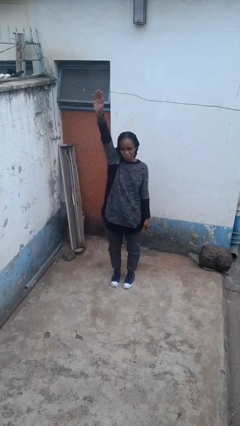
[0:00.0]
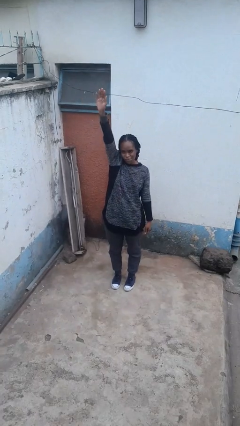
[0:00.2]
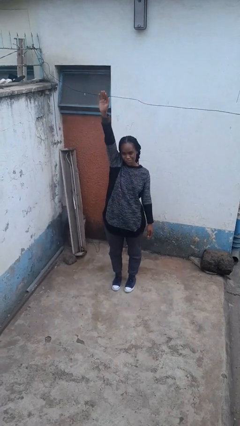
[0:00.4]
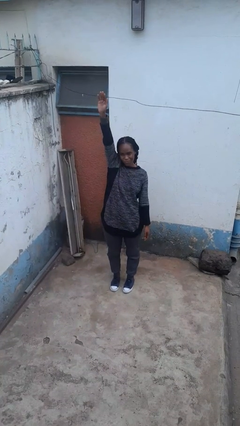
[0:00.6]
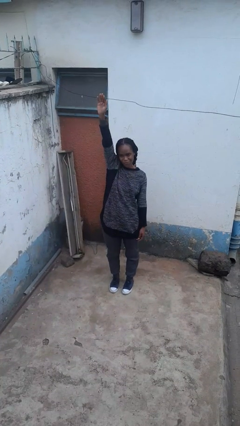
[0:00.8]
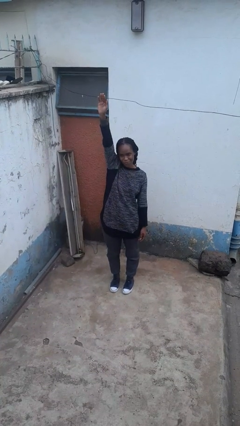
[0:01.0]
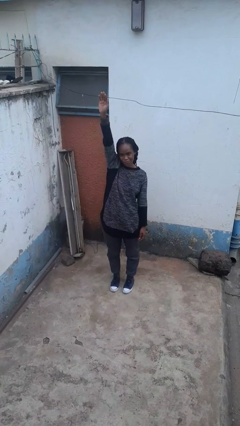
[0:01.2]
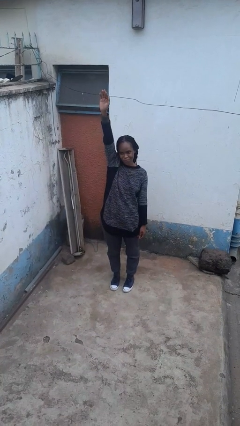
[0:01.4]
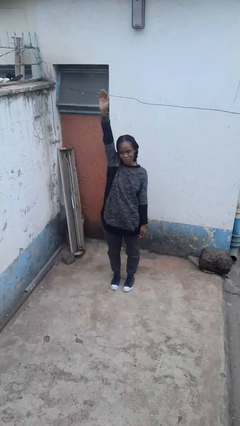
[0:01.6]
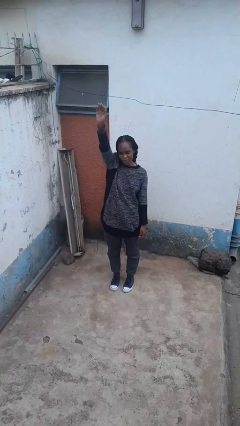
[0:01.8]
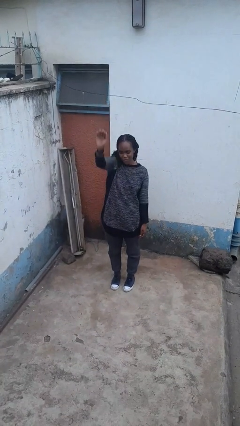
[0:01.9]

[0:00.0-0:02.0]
person gestures raise hand

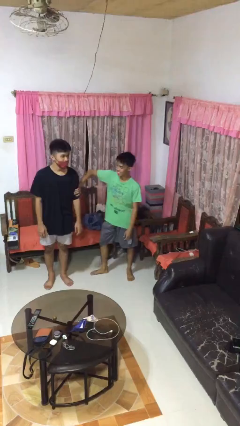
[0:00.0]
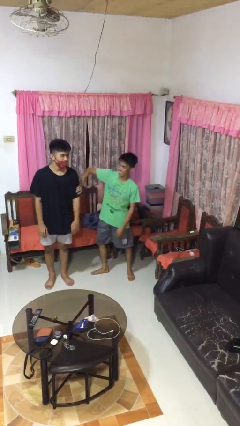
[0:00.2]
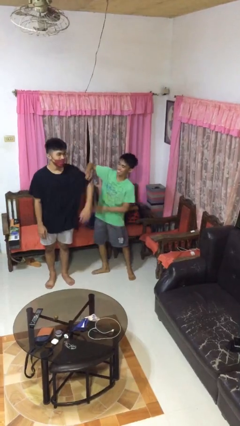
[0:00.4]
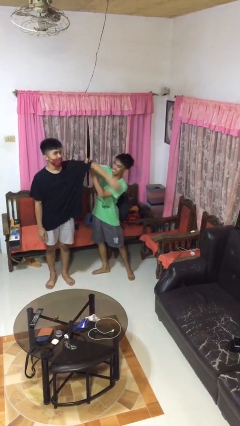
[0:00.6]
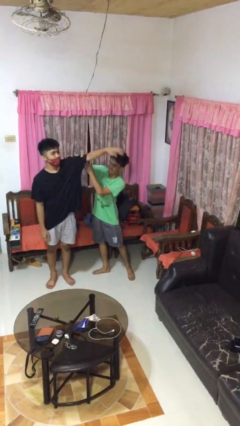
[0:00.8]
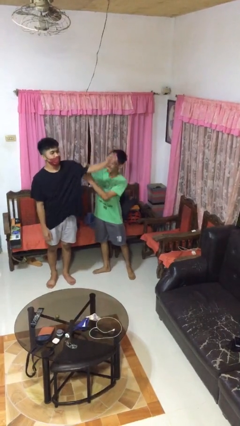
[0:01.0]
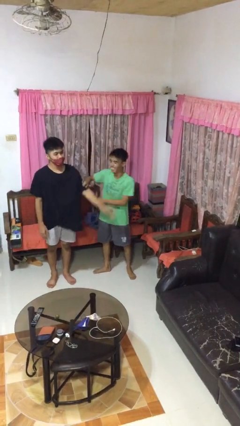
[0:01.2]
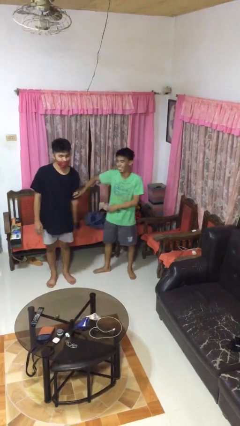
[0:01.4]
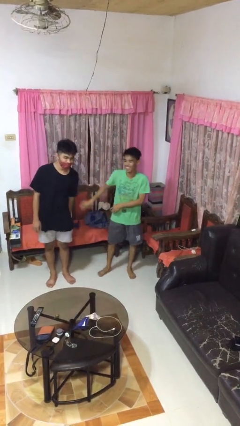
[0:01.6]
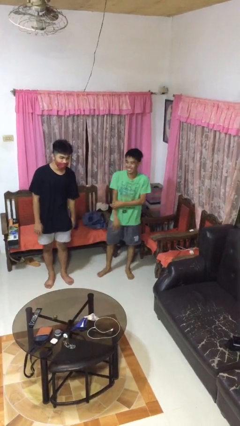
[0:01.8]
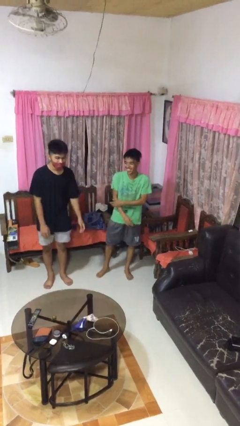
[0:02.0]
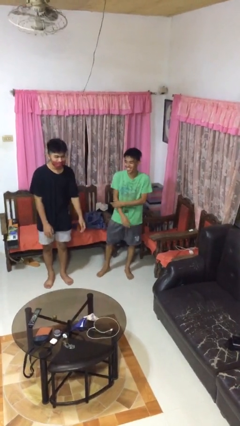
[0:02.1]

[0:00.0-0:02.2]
person grabs person by bicep

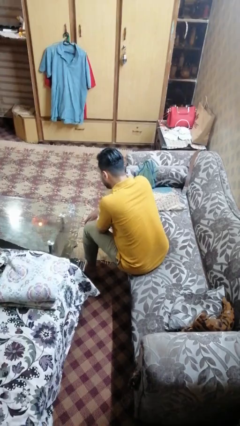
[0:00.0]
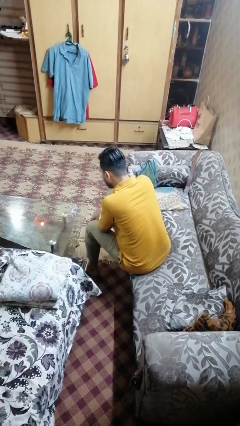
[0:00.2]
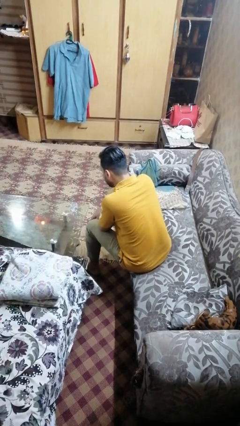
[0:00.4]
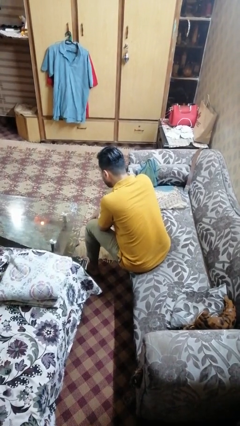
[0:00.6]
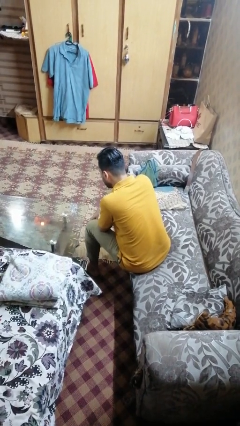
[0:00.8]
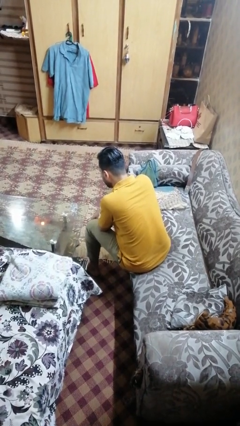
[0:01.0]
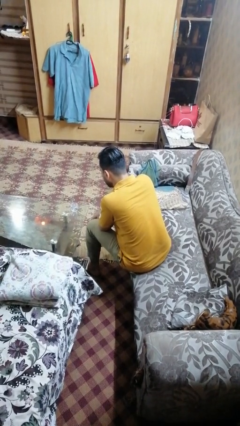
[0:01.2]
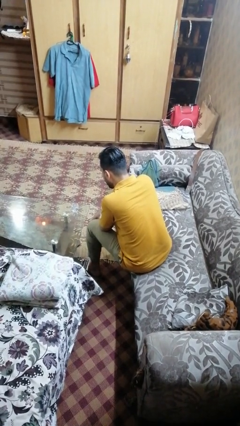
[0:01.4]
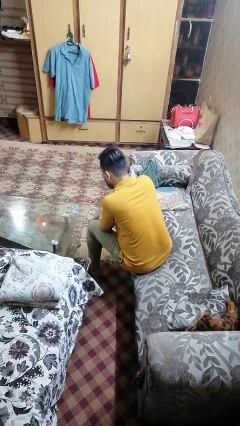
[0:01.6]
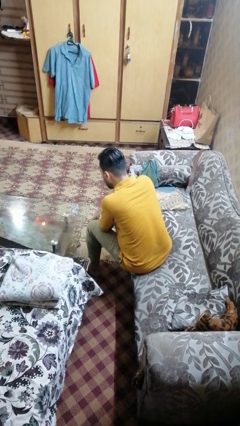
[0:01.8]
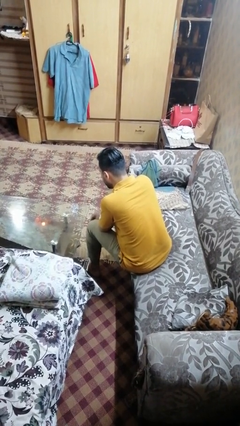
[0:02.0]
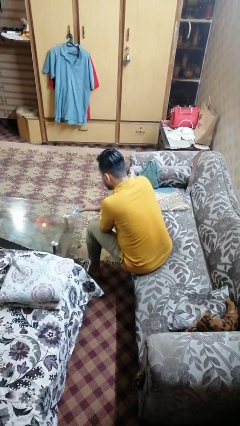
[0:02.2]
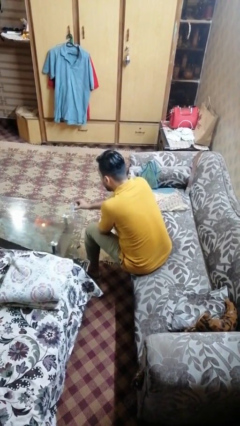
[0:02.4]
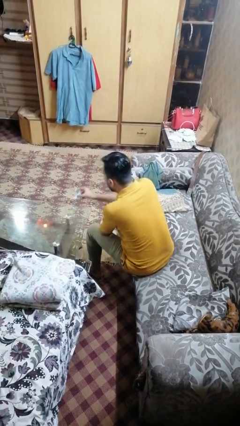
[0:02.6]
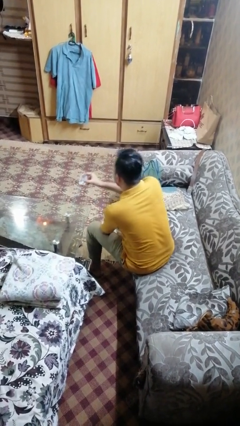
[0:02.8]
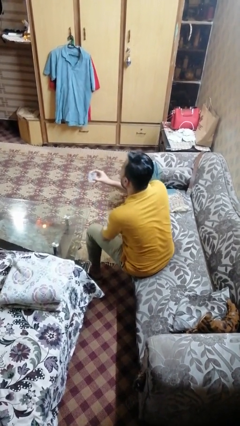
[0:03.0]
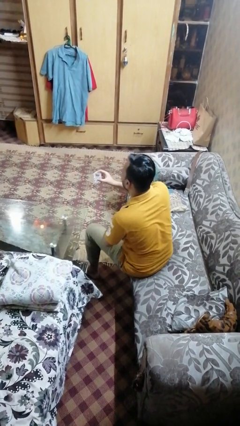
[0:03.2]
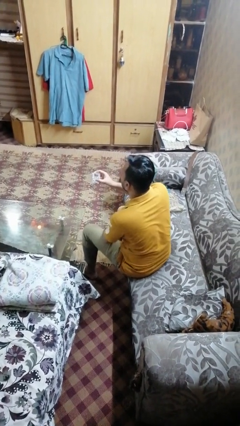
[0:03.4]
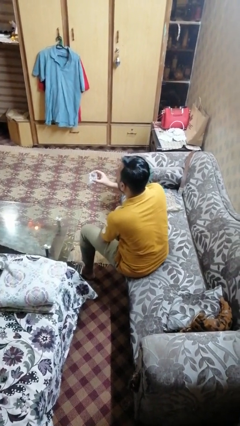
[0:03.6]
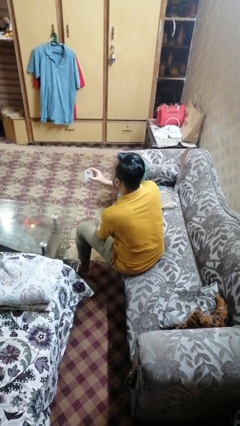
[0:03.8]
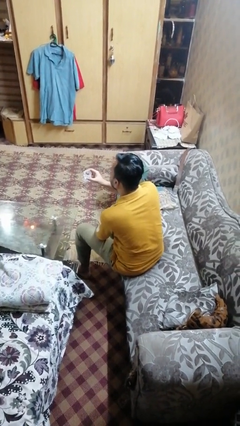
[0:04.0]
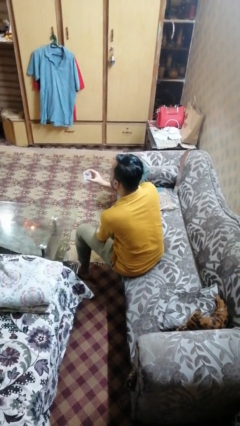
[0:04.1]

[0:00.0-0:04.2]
person picks up object from table

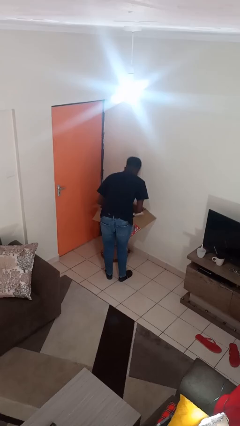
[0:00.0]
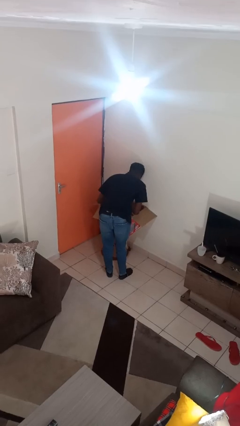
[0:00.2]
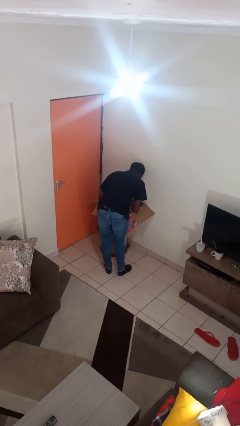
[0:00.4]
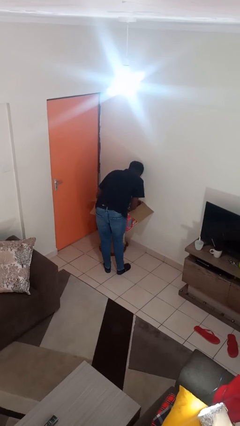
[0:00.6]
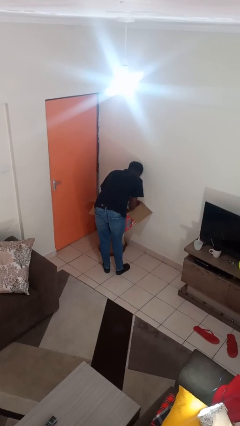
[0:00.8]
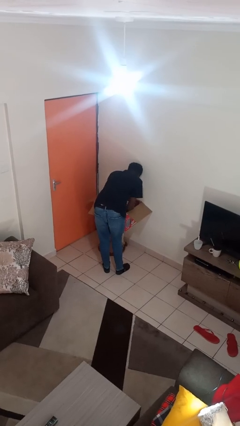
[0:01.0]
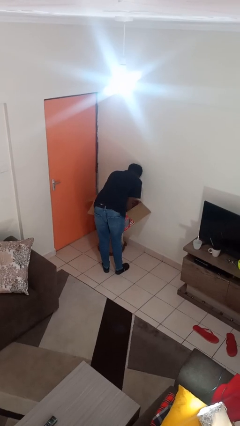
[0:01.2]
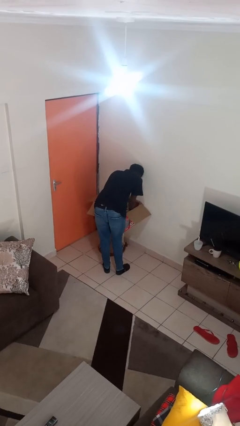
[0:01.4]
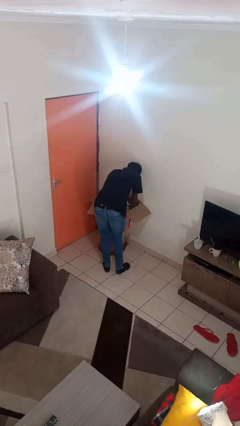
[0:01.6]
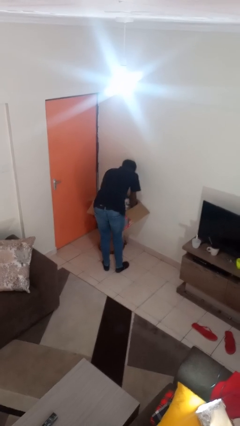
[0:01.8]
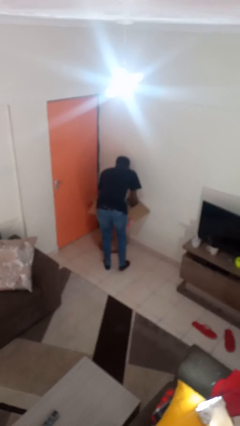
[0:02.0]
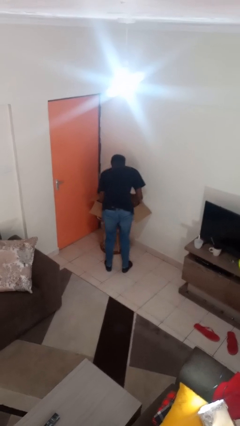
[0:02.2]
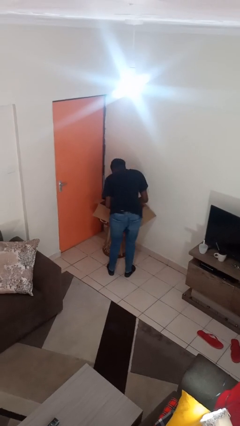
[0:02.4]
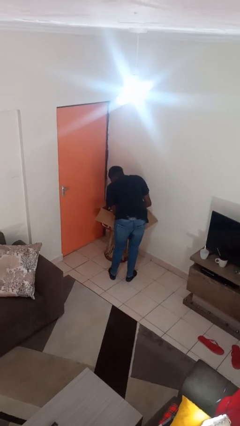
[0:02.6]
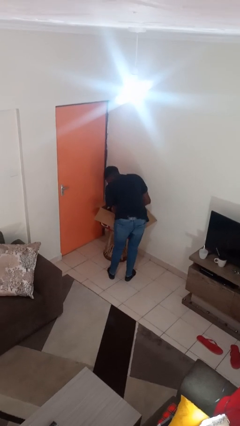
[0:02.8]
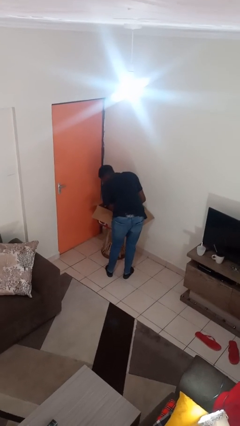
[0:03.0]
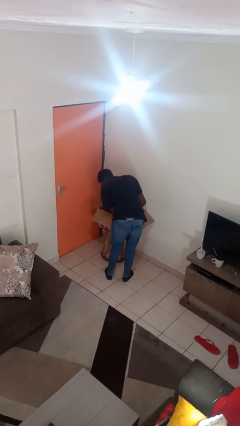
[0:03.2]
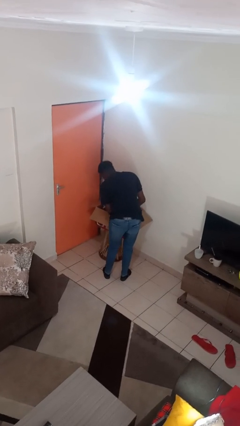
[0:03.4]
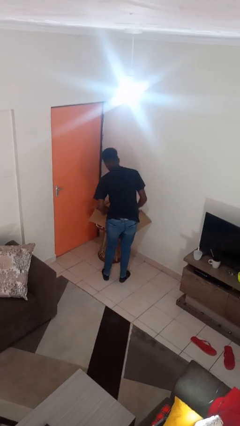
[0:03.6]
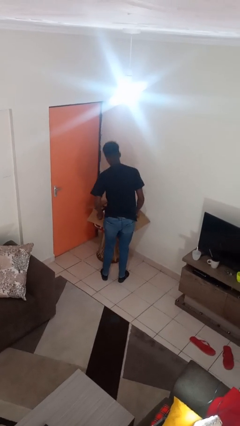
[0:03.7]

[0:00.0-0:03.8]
person searches in box

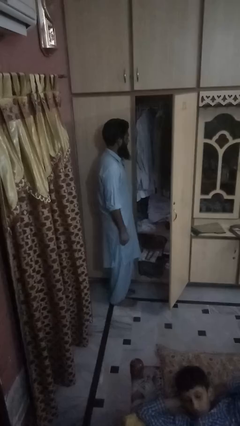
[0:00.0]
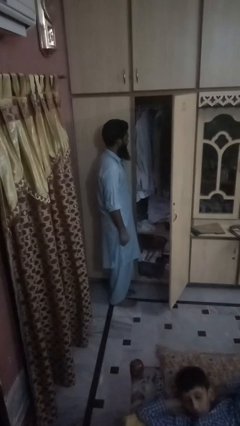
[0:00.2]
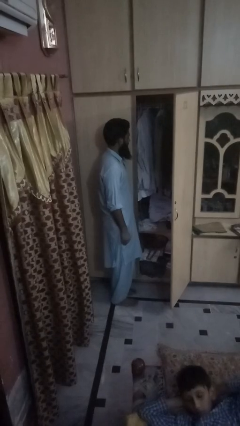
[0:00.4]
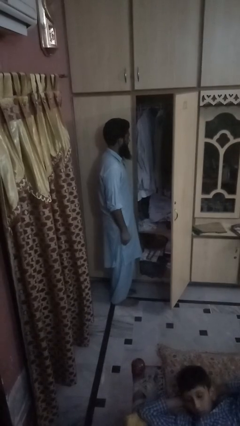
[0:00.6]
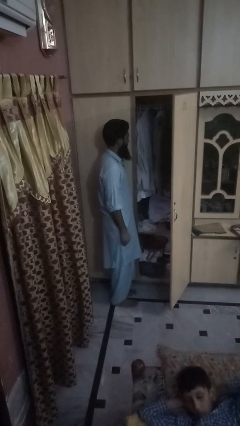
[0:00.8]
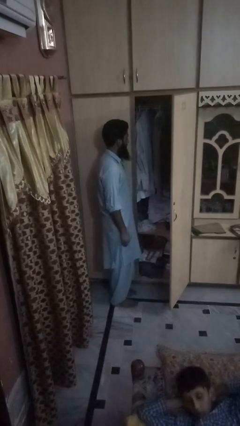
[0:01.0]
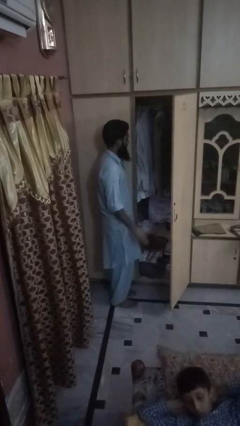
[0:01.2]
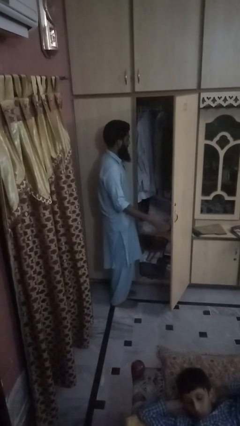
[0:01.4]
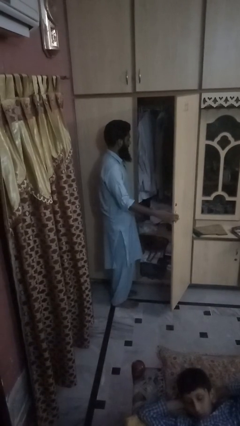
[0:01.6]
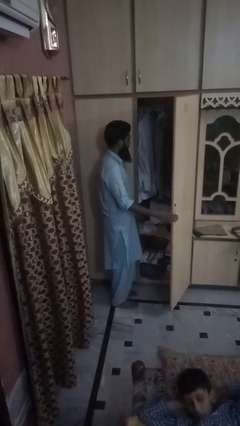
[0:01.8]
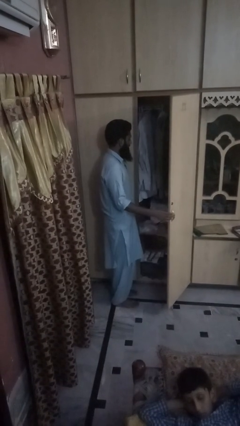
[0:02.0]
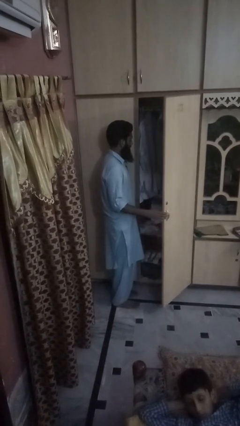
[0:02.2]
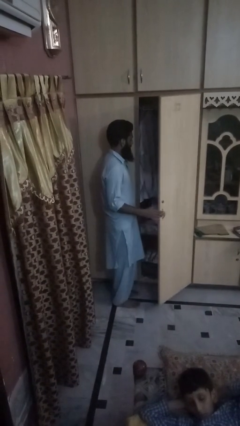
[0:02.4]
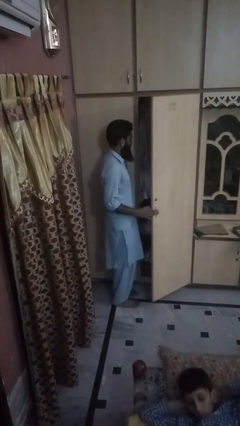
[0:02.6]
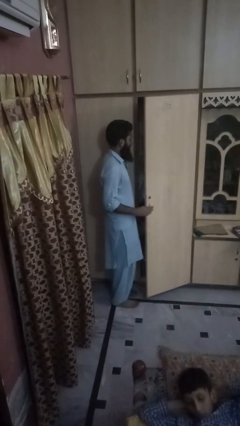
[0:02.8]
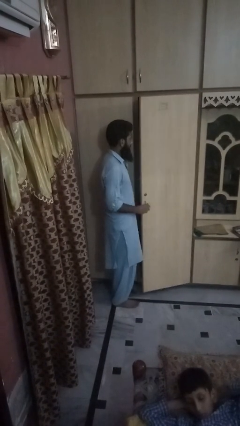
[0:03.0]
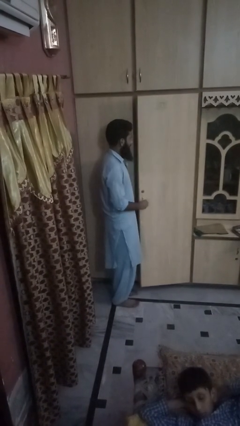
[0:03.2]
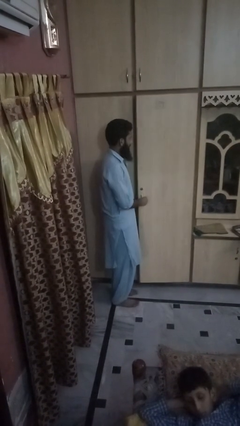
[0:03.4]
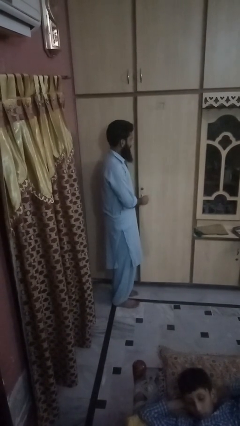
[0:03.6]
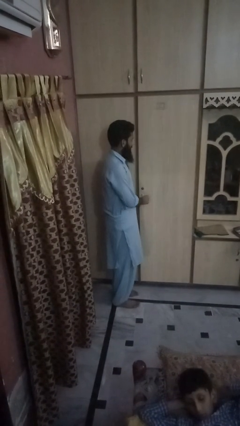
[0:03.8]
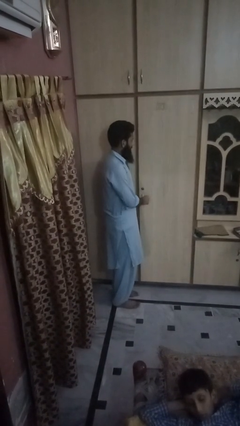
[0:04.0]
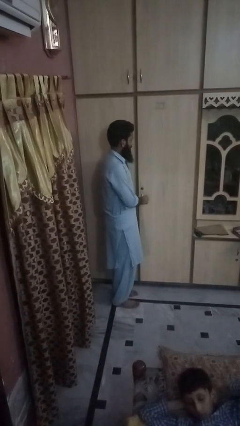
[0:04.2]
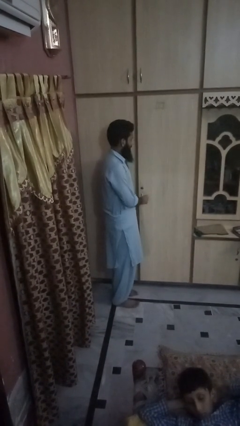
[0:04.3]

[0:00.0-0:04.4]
person closes dresser drawer

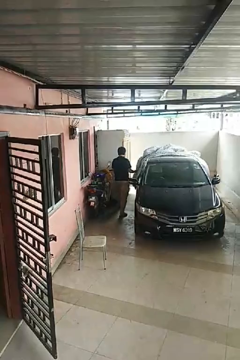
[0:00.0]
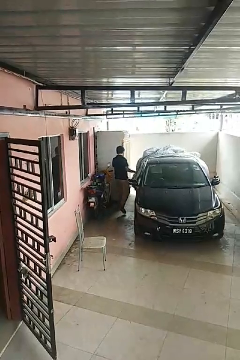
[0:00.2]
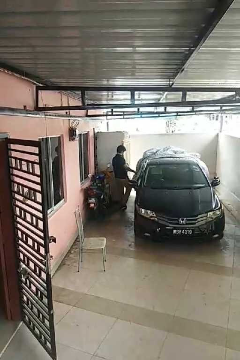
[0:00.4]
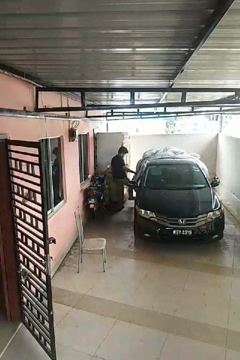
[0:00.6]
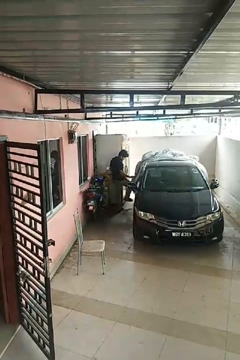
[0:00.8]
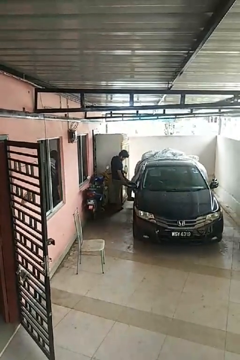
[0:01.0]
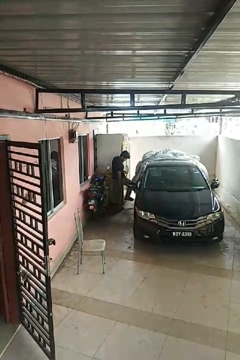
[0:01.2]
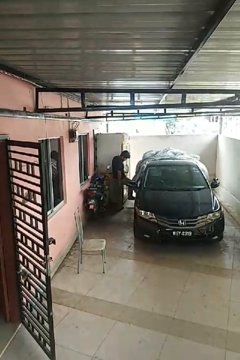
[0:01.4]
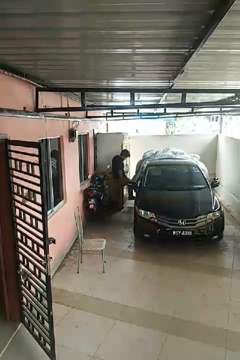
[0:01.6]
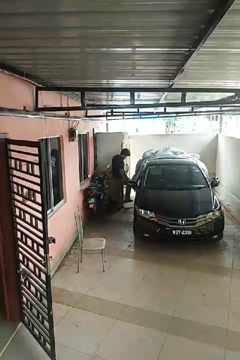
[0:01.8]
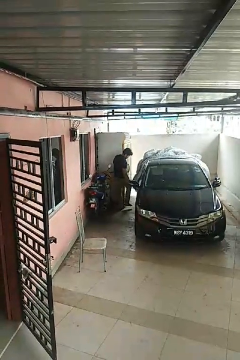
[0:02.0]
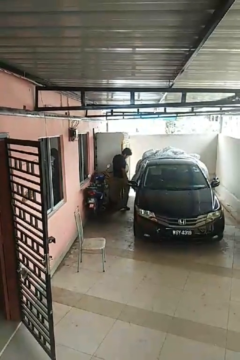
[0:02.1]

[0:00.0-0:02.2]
person kicks car tires
